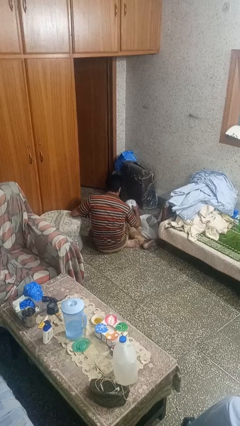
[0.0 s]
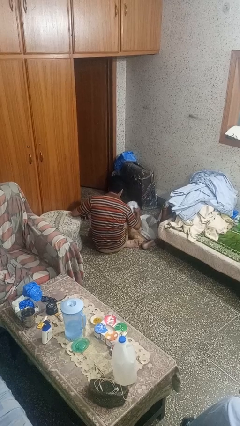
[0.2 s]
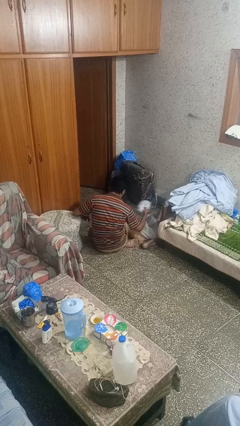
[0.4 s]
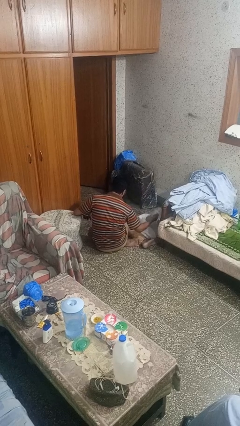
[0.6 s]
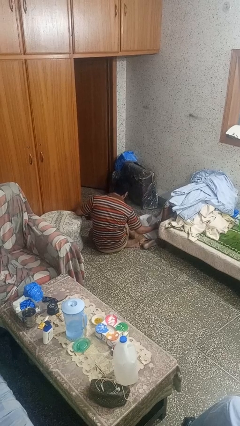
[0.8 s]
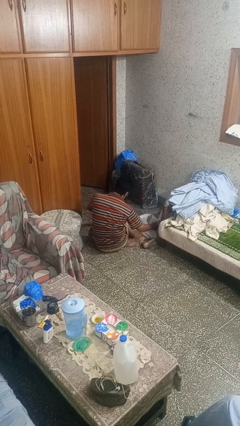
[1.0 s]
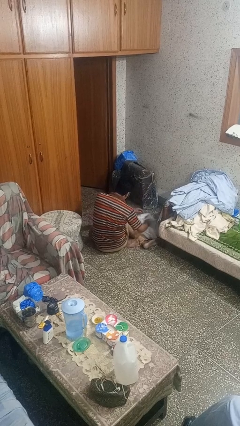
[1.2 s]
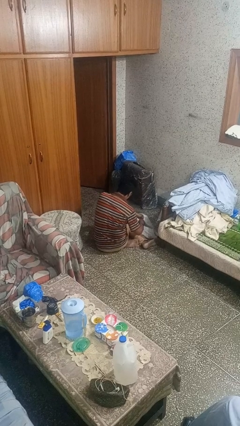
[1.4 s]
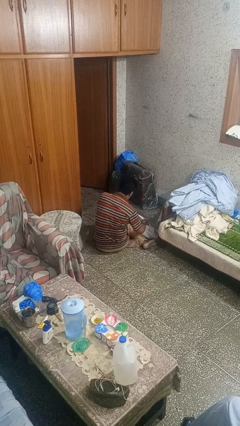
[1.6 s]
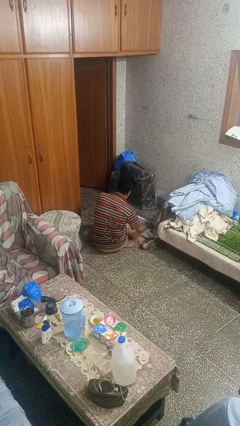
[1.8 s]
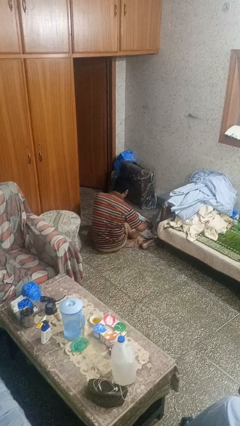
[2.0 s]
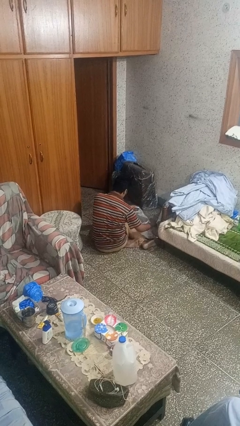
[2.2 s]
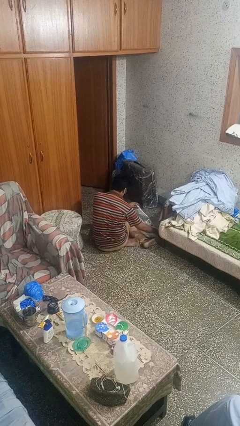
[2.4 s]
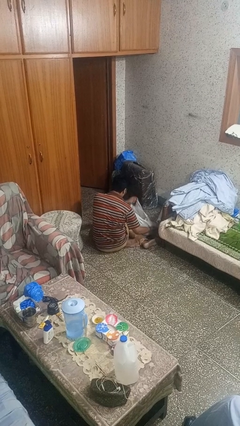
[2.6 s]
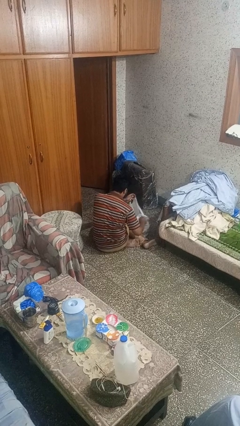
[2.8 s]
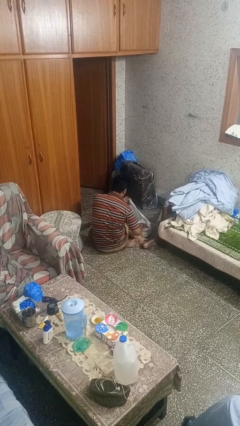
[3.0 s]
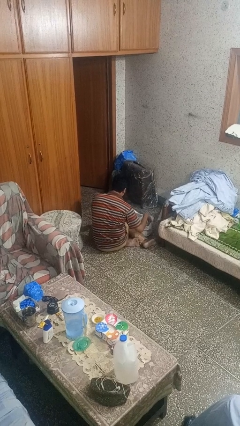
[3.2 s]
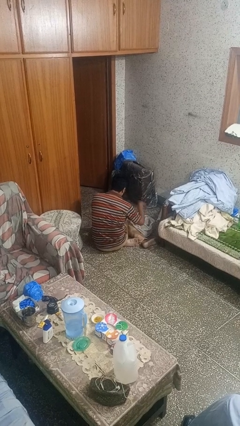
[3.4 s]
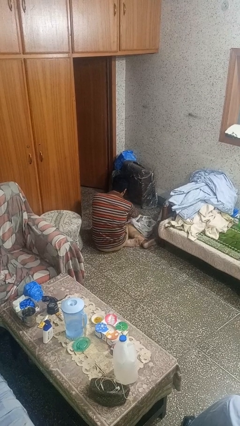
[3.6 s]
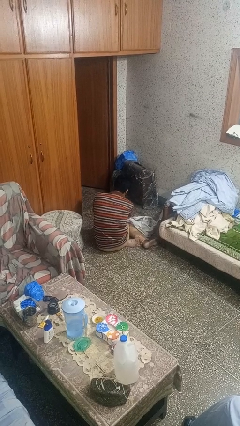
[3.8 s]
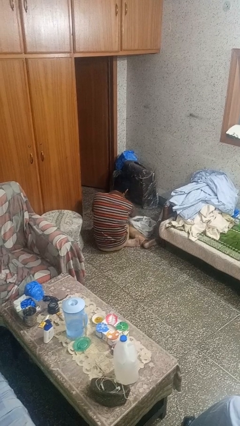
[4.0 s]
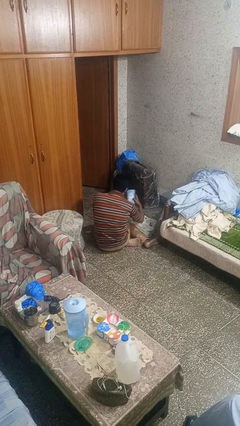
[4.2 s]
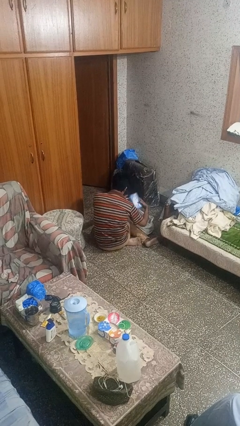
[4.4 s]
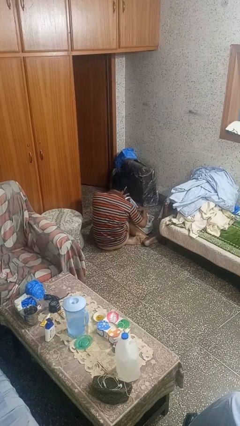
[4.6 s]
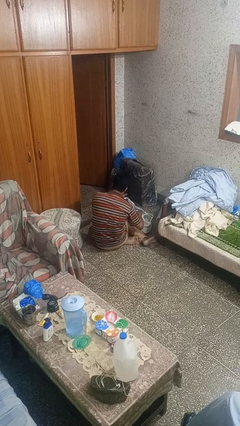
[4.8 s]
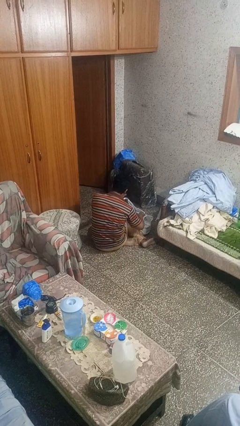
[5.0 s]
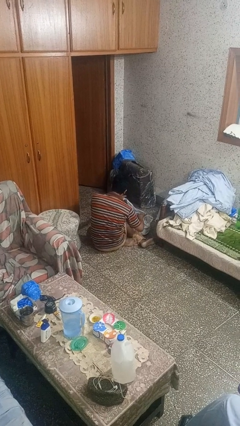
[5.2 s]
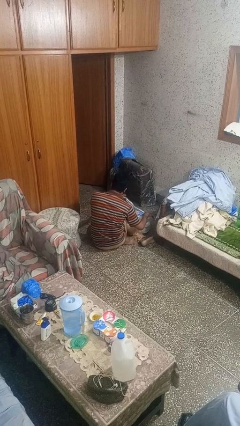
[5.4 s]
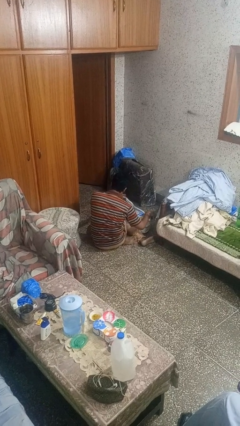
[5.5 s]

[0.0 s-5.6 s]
person puts object into bag

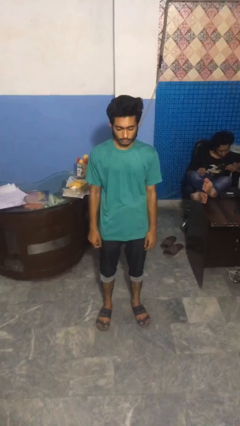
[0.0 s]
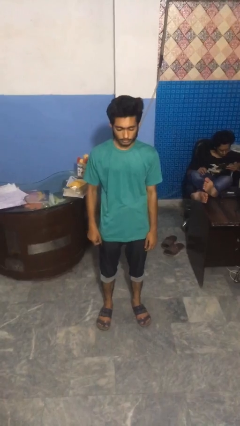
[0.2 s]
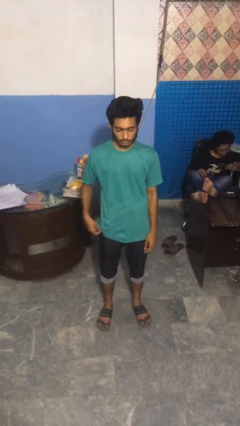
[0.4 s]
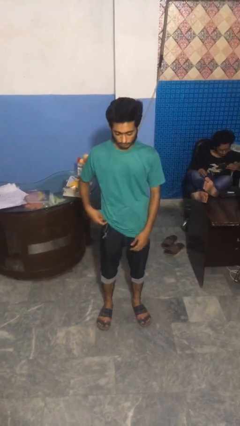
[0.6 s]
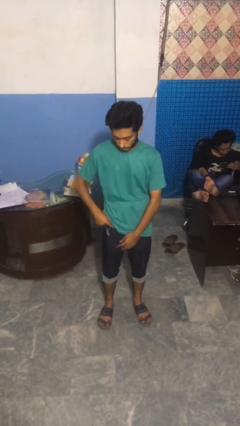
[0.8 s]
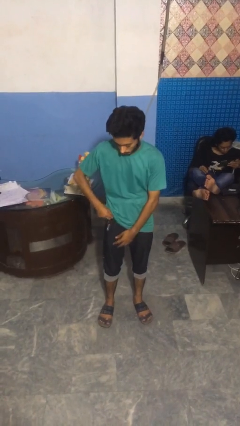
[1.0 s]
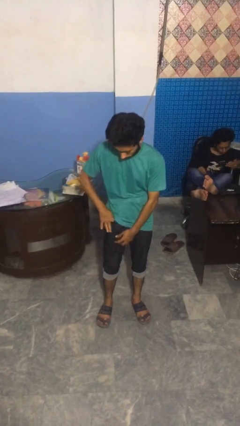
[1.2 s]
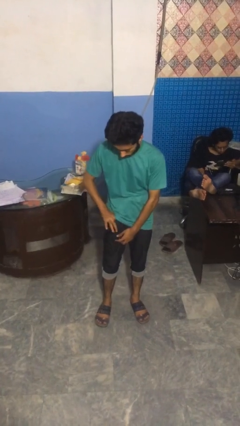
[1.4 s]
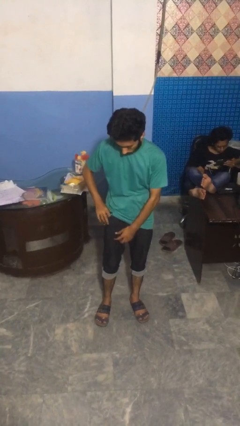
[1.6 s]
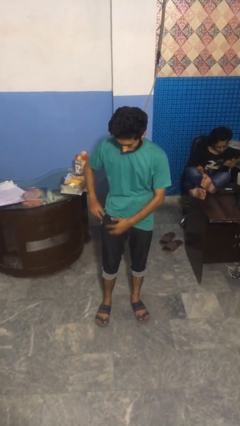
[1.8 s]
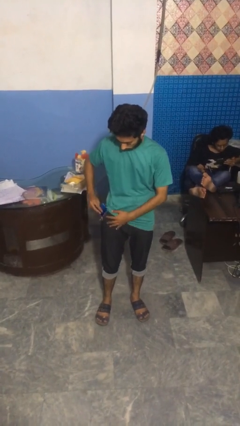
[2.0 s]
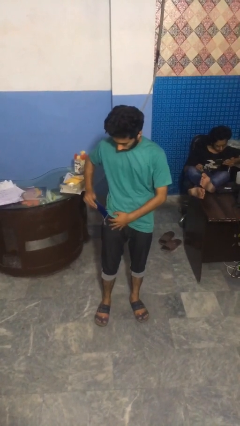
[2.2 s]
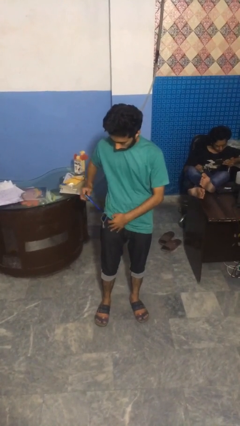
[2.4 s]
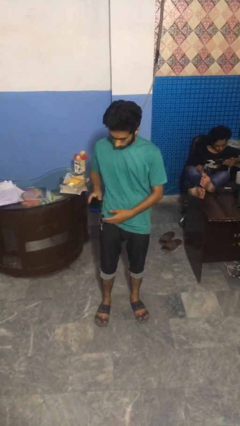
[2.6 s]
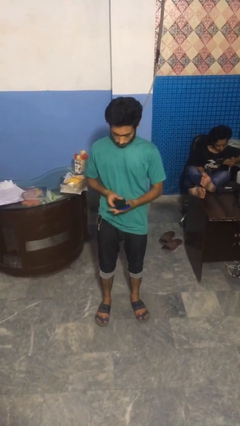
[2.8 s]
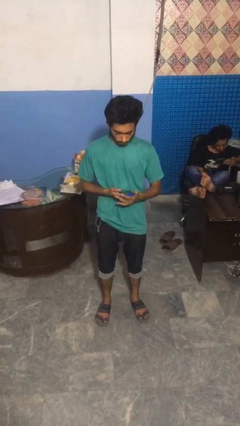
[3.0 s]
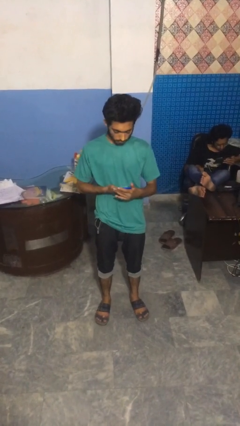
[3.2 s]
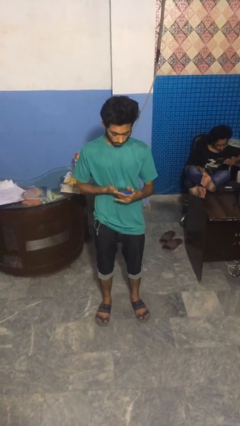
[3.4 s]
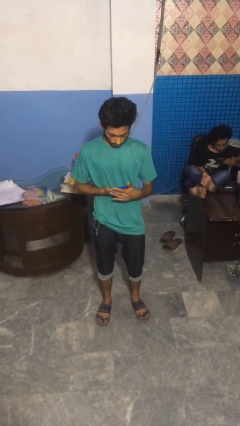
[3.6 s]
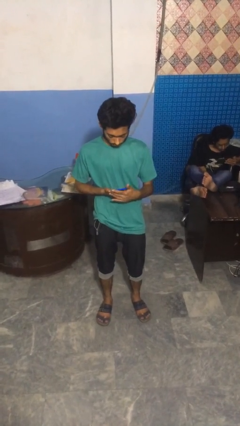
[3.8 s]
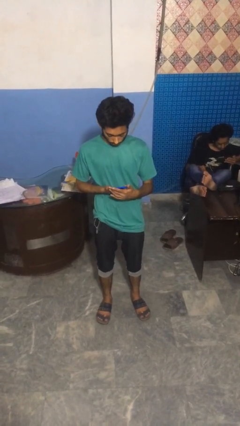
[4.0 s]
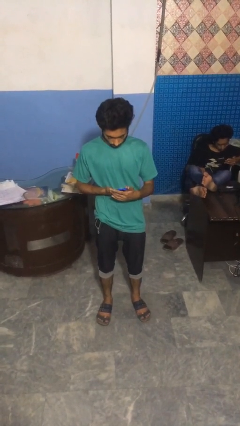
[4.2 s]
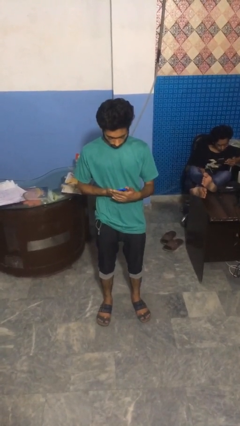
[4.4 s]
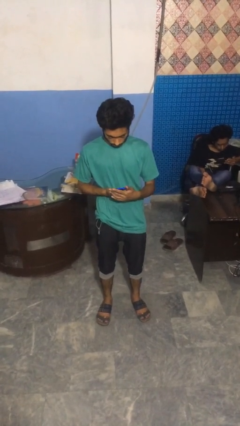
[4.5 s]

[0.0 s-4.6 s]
person takes phone from pocket

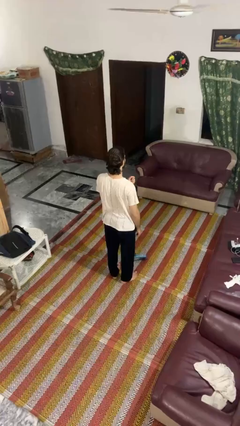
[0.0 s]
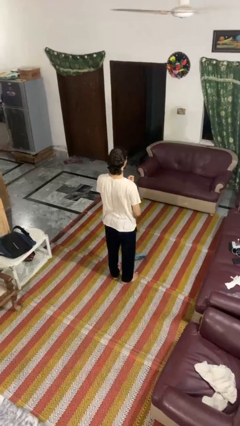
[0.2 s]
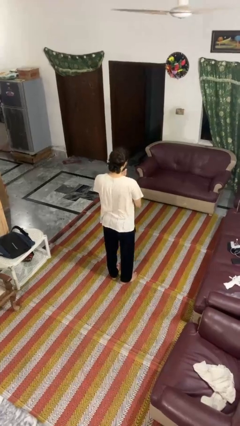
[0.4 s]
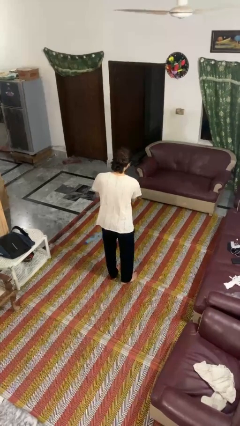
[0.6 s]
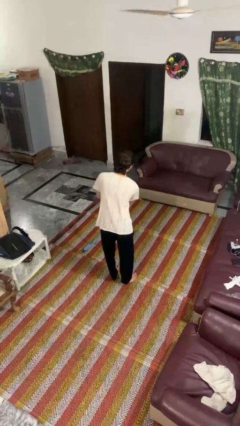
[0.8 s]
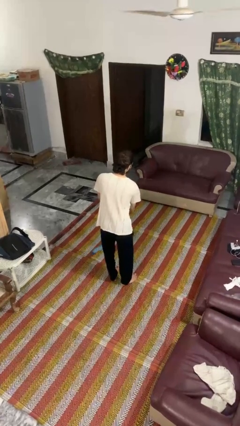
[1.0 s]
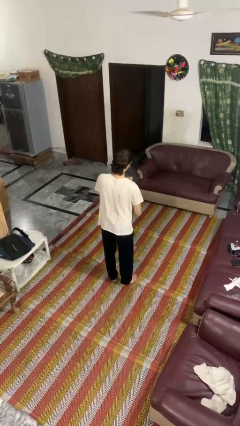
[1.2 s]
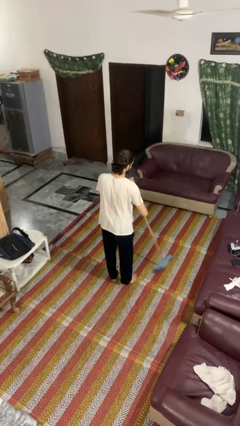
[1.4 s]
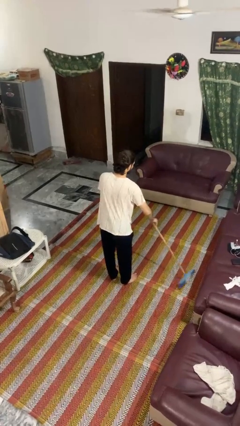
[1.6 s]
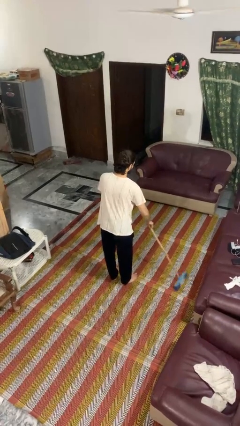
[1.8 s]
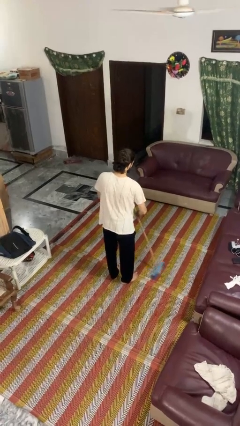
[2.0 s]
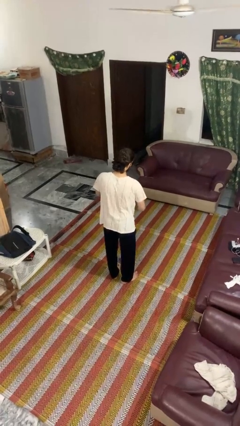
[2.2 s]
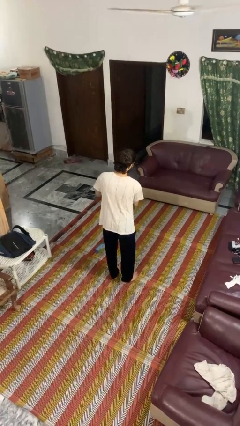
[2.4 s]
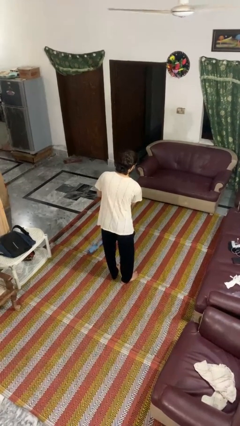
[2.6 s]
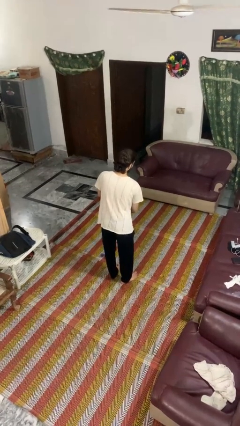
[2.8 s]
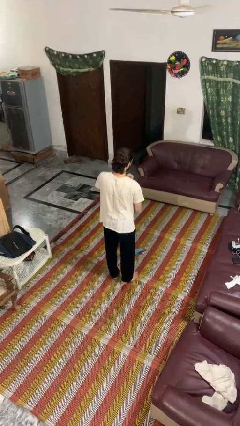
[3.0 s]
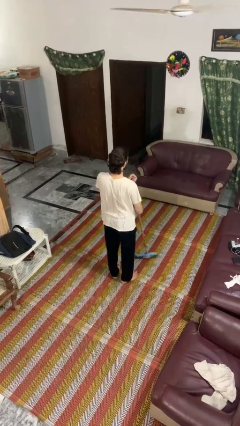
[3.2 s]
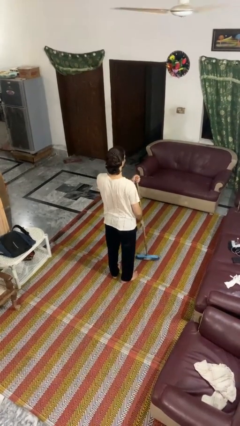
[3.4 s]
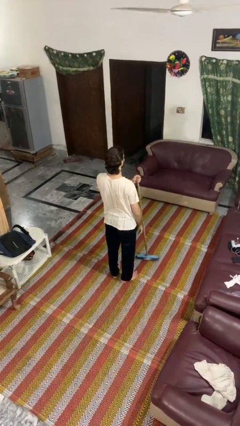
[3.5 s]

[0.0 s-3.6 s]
person sweeps floor

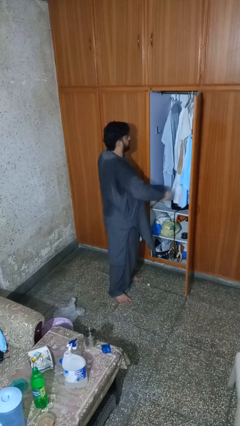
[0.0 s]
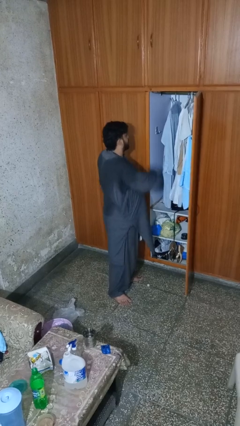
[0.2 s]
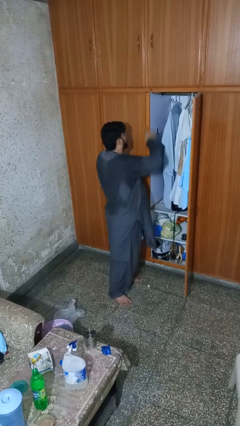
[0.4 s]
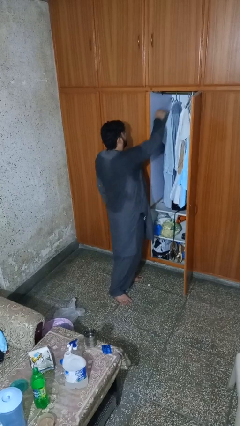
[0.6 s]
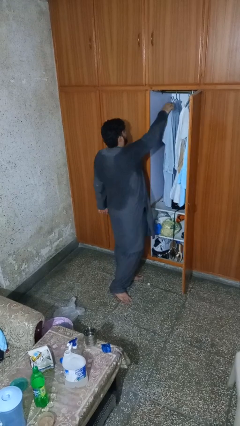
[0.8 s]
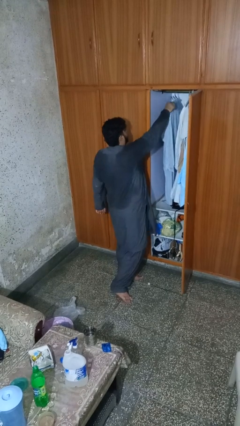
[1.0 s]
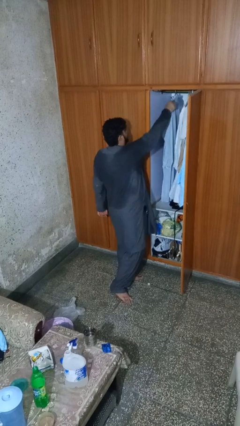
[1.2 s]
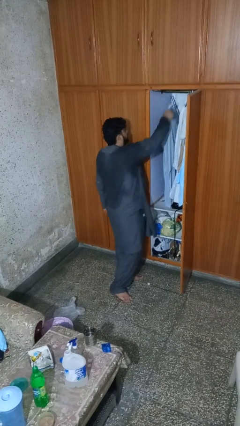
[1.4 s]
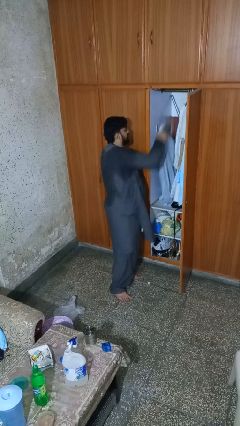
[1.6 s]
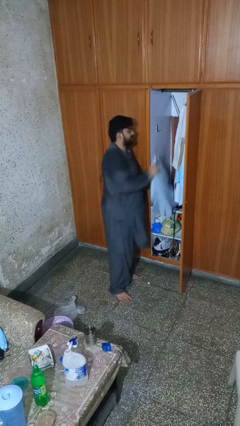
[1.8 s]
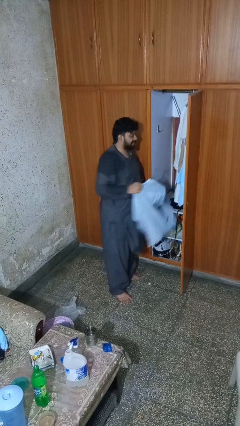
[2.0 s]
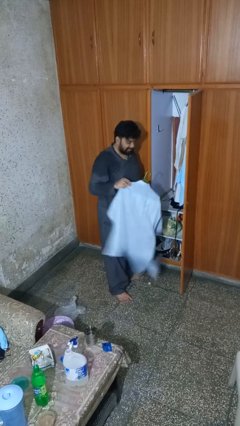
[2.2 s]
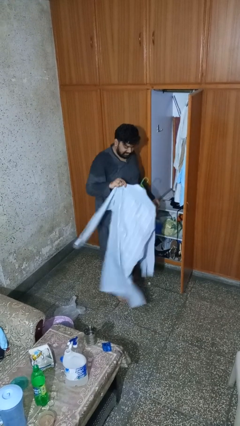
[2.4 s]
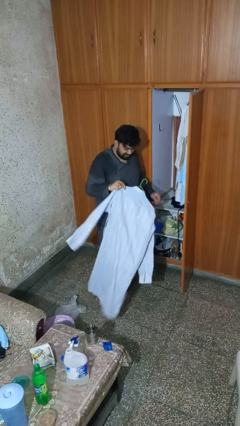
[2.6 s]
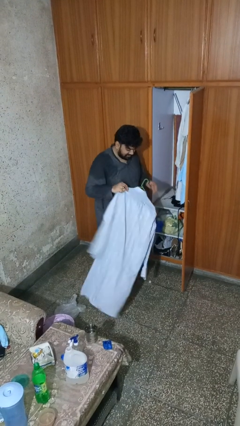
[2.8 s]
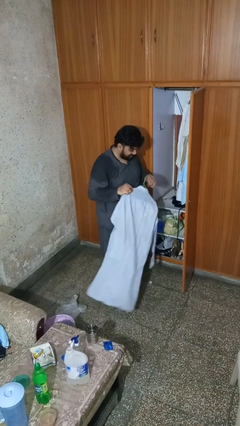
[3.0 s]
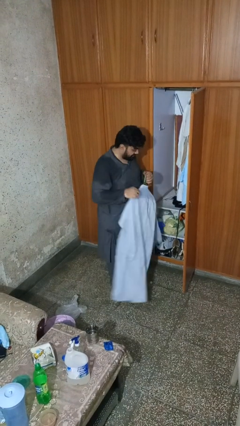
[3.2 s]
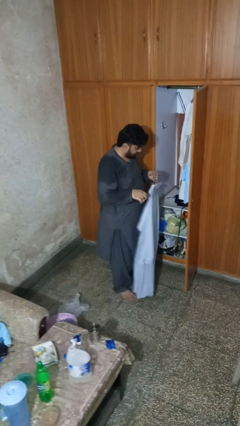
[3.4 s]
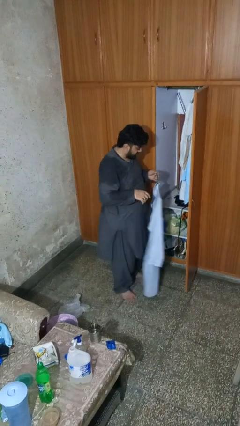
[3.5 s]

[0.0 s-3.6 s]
person takes clothes from closet

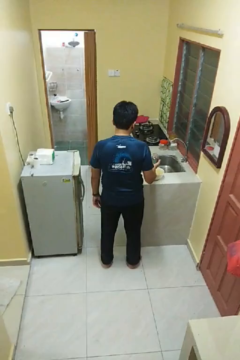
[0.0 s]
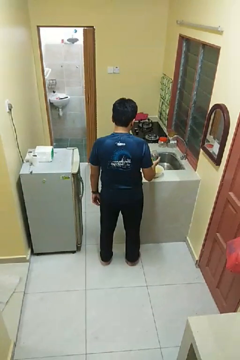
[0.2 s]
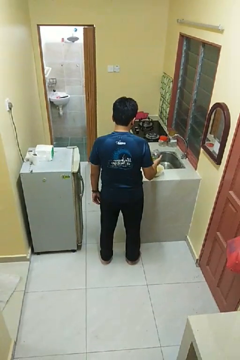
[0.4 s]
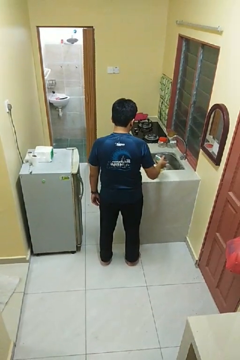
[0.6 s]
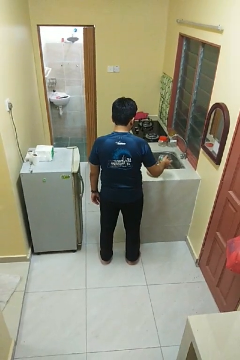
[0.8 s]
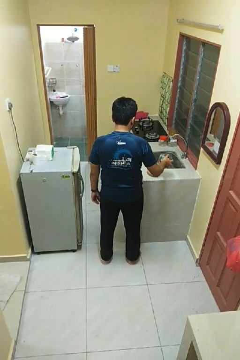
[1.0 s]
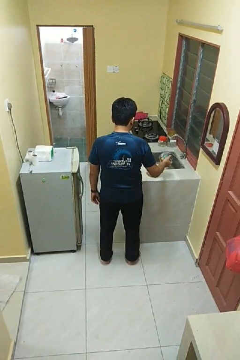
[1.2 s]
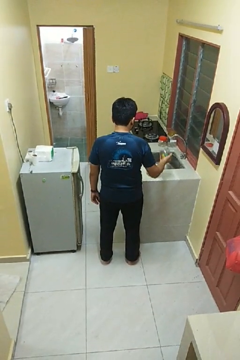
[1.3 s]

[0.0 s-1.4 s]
person pours into bowl
